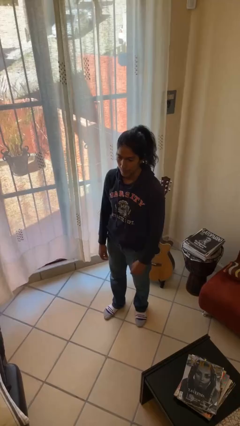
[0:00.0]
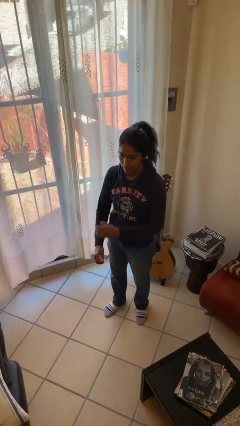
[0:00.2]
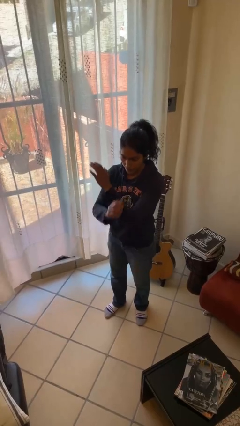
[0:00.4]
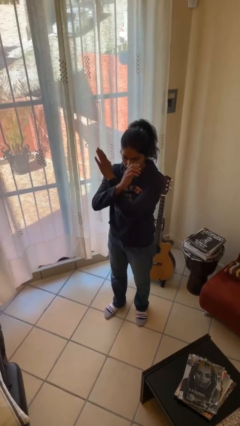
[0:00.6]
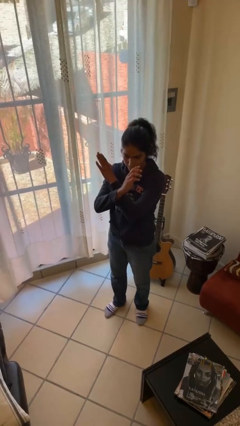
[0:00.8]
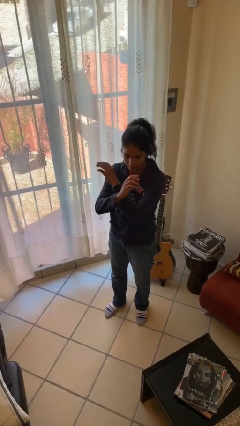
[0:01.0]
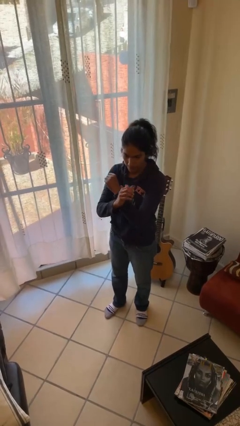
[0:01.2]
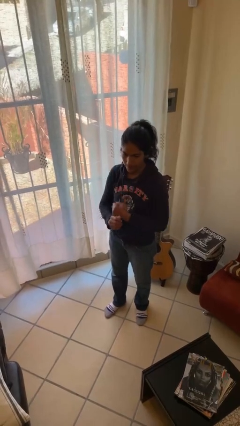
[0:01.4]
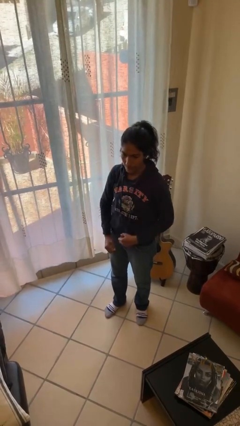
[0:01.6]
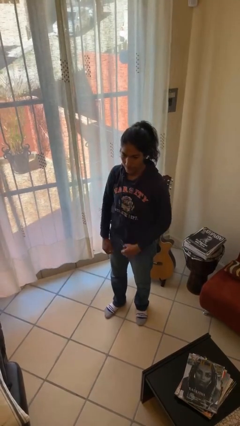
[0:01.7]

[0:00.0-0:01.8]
person gestures arms x

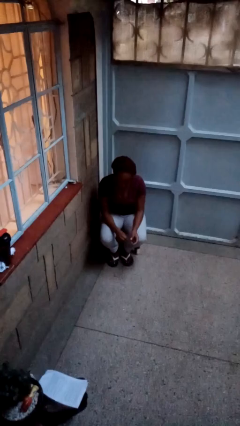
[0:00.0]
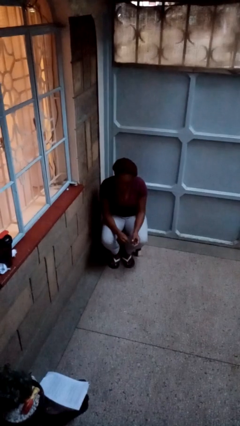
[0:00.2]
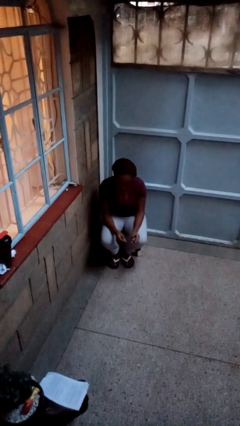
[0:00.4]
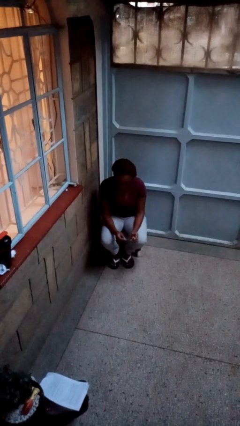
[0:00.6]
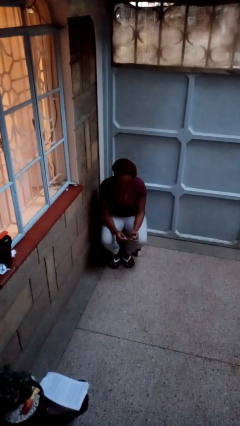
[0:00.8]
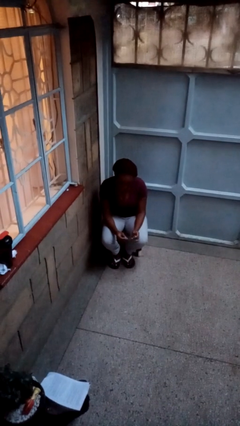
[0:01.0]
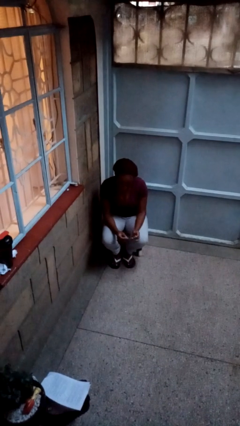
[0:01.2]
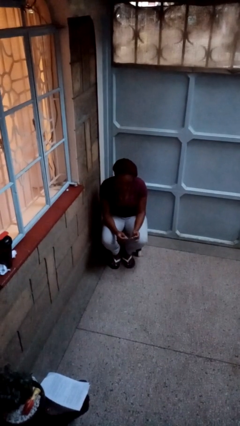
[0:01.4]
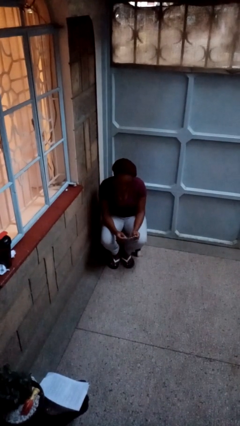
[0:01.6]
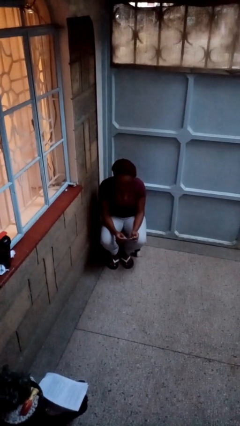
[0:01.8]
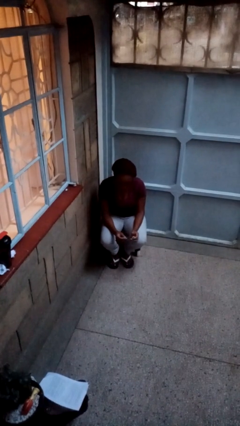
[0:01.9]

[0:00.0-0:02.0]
person clips fingernails

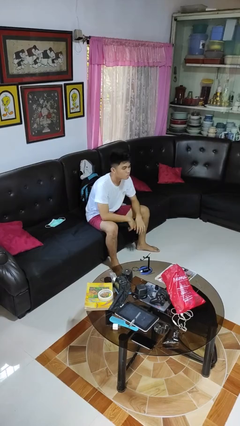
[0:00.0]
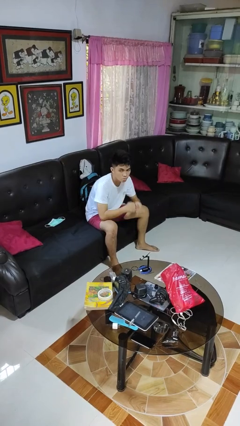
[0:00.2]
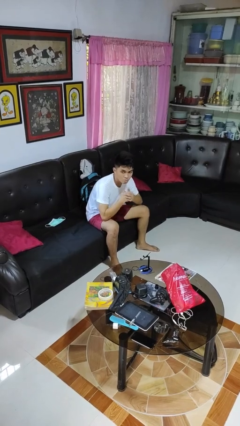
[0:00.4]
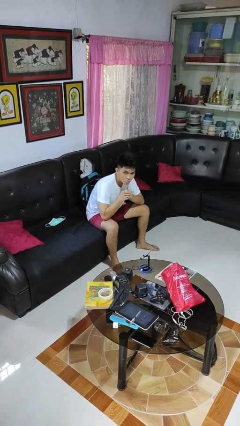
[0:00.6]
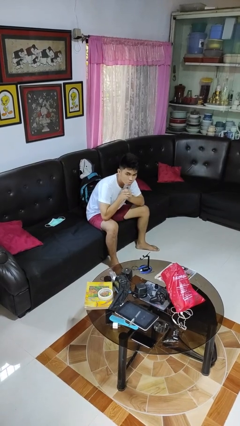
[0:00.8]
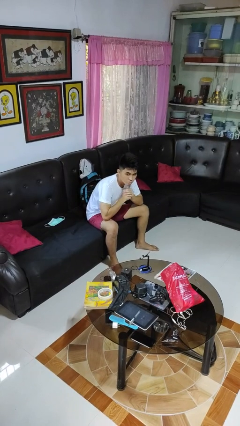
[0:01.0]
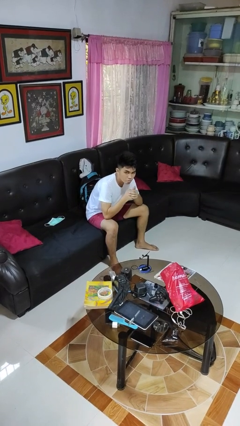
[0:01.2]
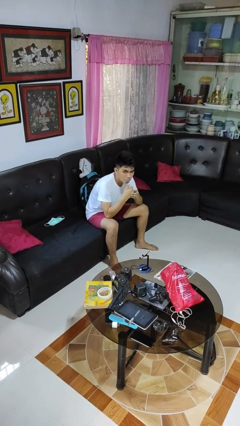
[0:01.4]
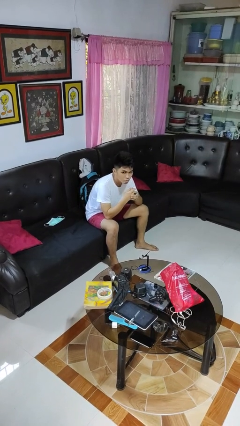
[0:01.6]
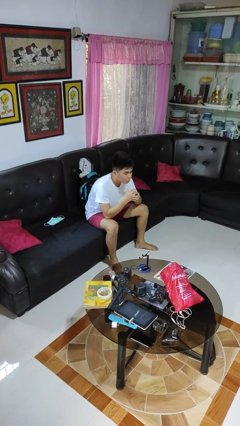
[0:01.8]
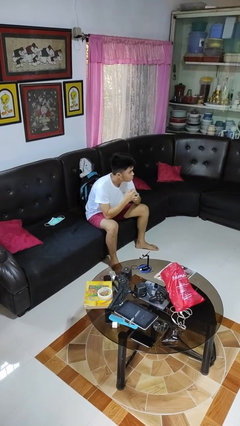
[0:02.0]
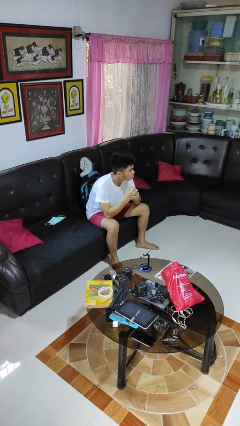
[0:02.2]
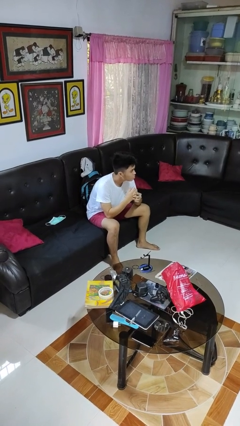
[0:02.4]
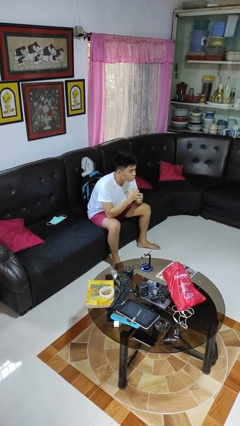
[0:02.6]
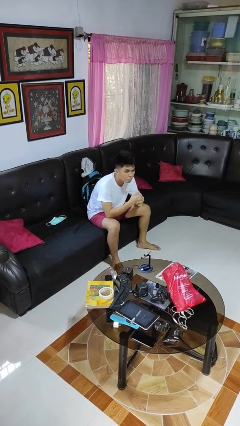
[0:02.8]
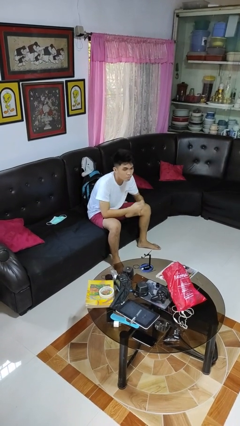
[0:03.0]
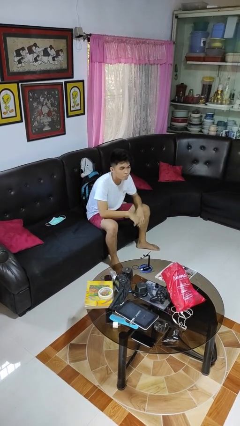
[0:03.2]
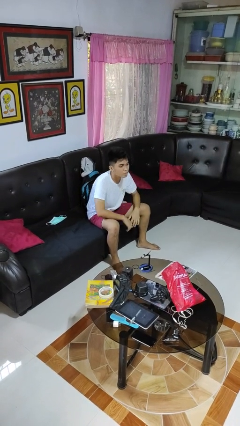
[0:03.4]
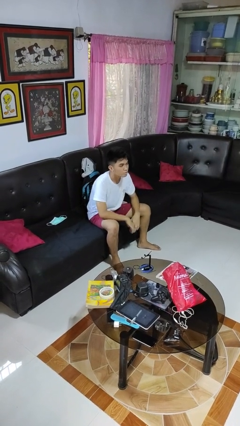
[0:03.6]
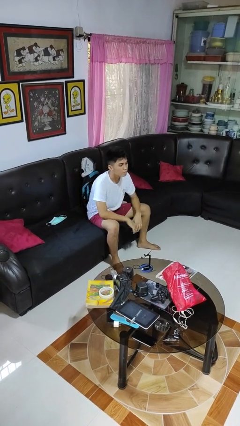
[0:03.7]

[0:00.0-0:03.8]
person cracks knuckles

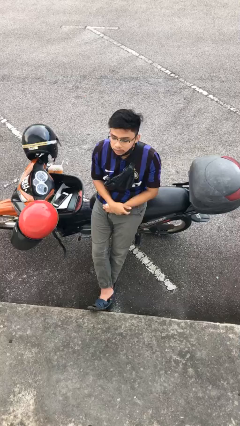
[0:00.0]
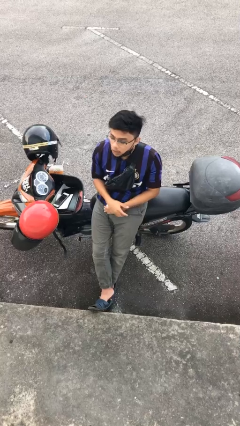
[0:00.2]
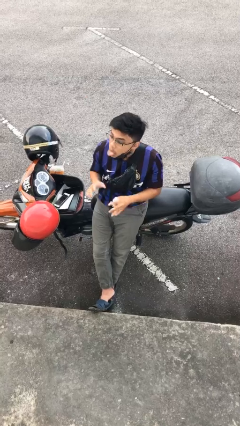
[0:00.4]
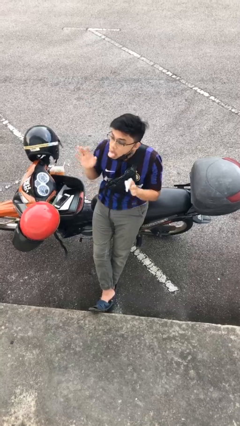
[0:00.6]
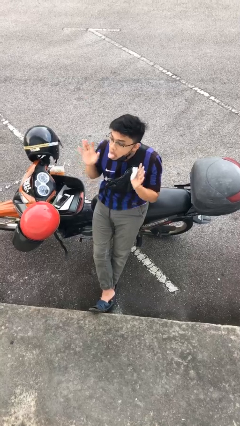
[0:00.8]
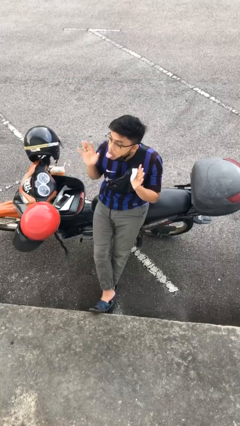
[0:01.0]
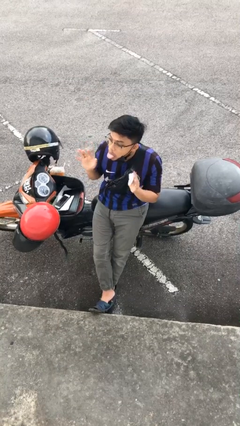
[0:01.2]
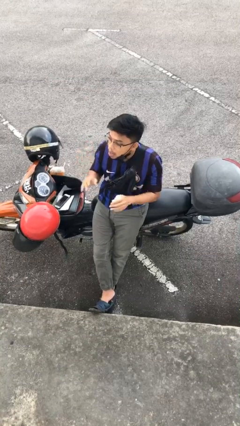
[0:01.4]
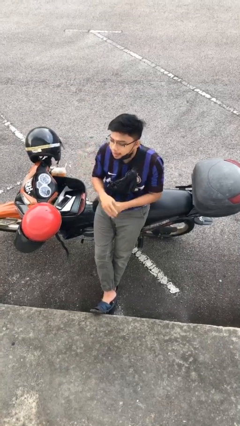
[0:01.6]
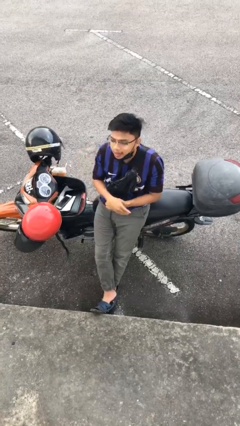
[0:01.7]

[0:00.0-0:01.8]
person sticks out tongue

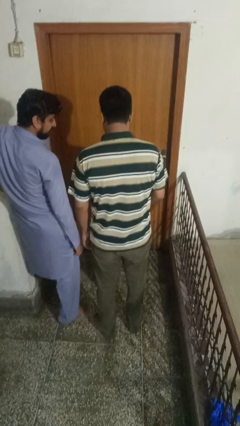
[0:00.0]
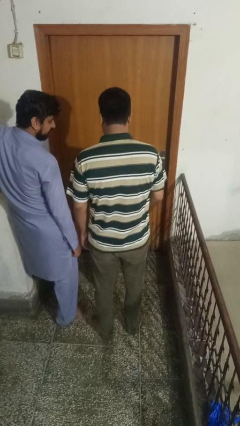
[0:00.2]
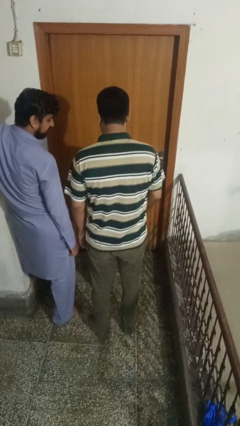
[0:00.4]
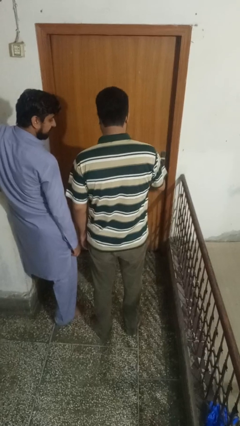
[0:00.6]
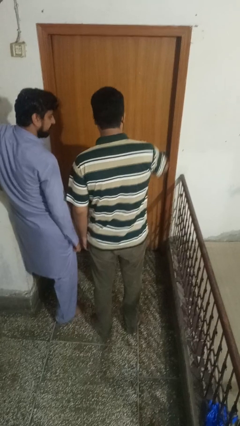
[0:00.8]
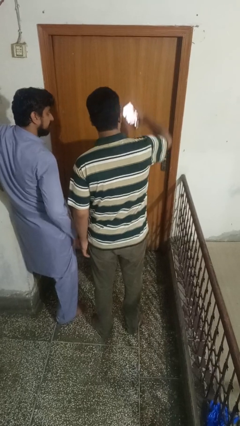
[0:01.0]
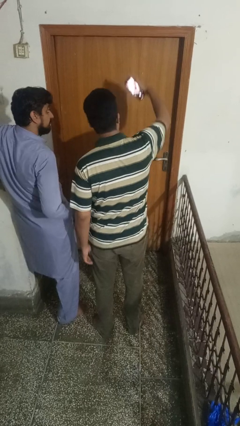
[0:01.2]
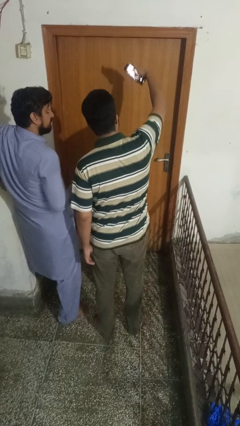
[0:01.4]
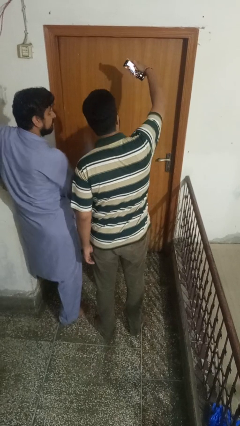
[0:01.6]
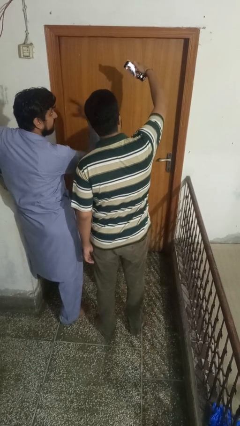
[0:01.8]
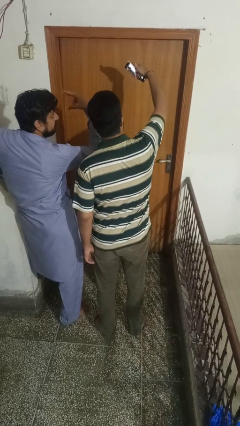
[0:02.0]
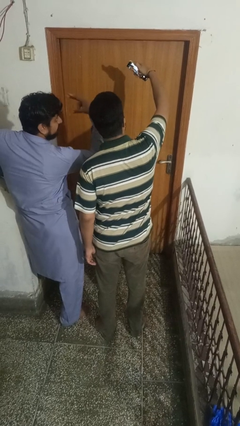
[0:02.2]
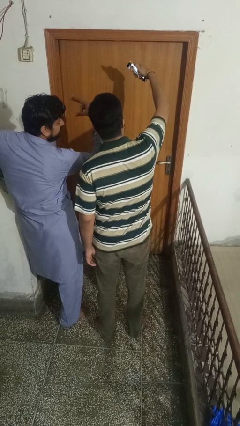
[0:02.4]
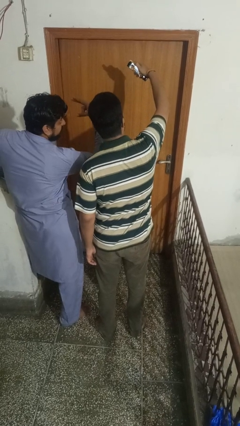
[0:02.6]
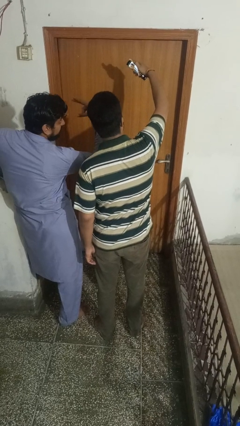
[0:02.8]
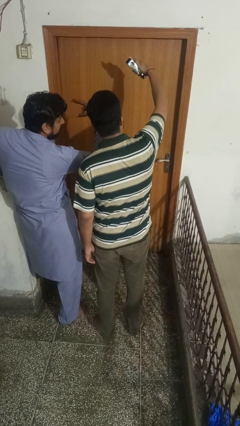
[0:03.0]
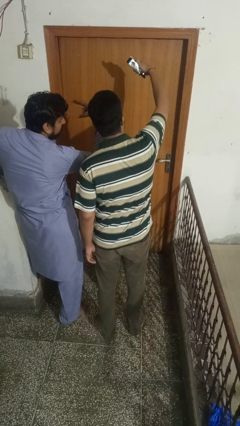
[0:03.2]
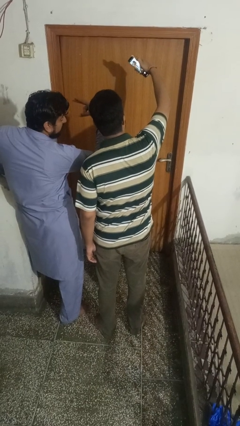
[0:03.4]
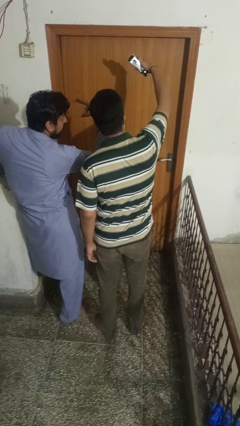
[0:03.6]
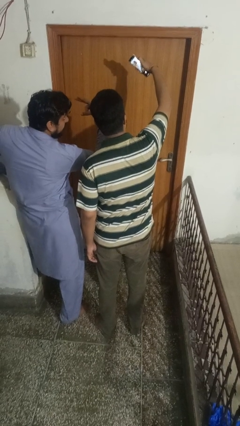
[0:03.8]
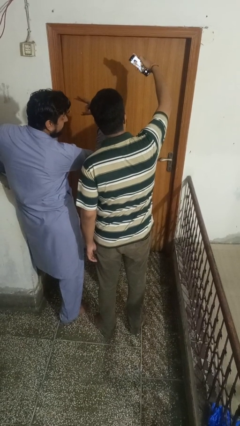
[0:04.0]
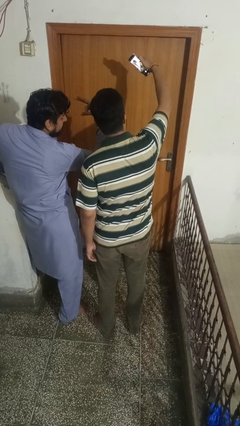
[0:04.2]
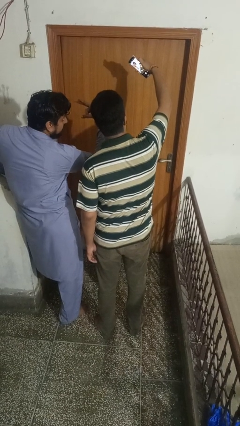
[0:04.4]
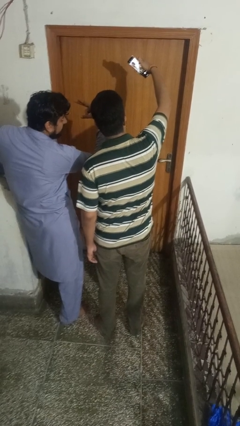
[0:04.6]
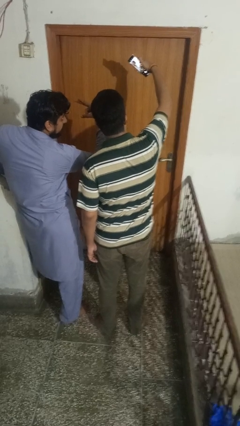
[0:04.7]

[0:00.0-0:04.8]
person takes selfie with person

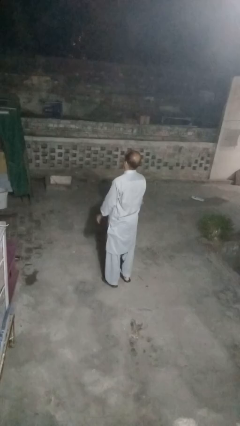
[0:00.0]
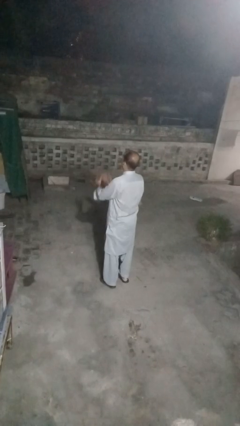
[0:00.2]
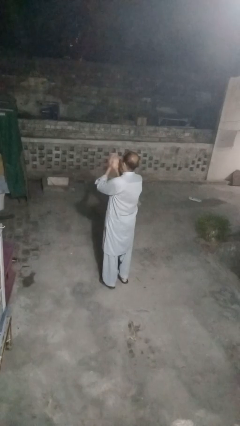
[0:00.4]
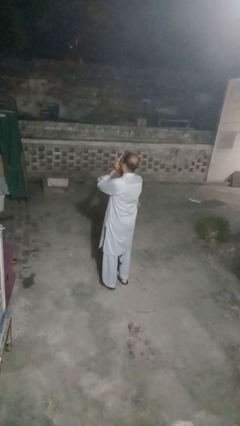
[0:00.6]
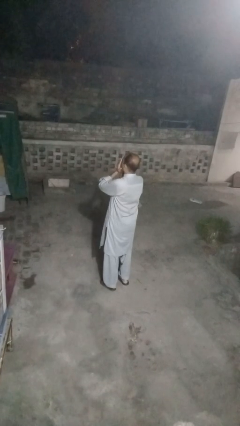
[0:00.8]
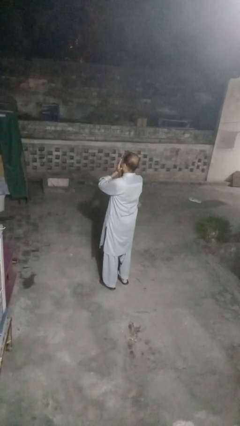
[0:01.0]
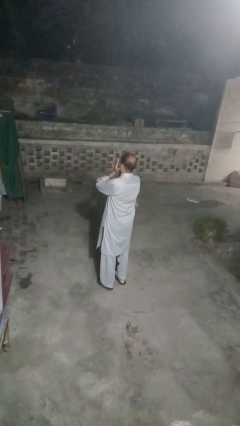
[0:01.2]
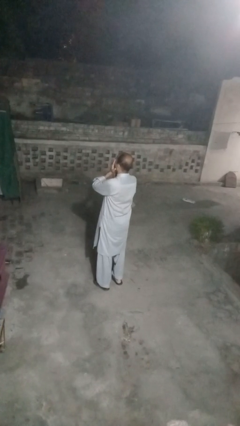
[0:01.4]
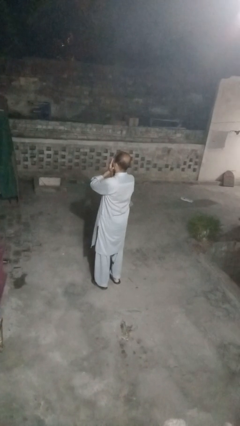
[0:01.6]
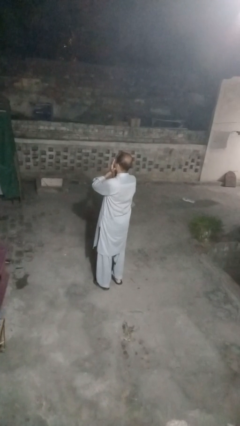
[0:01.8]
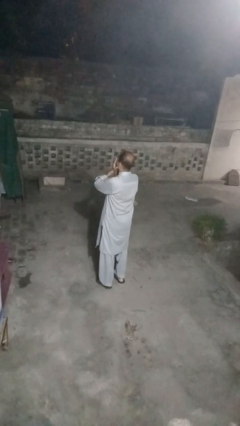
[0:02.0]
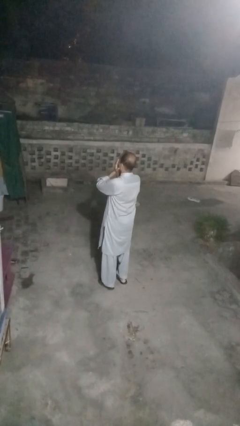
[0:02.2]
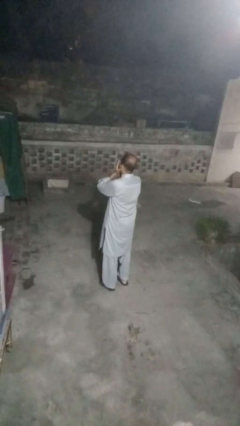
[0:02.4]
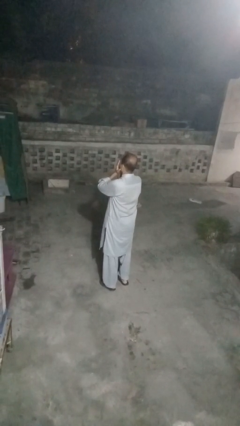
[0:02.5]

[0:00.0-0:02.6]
person covers face with hands
